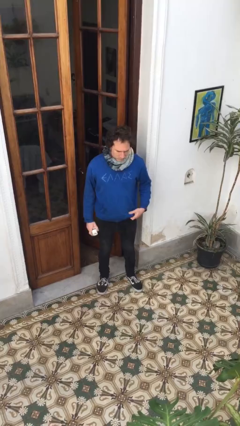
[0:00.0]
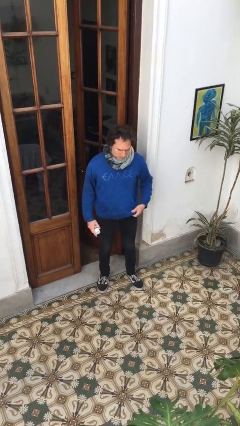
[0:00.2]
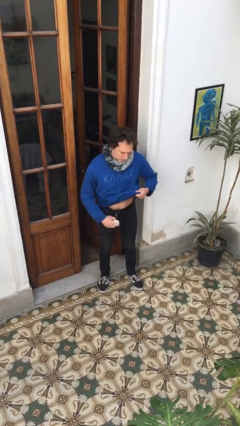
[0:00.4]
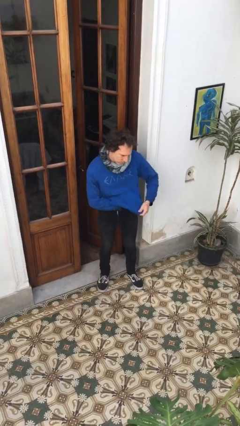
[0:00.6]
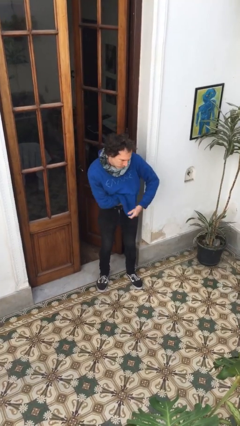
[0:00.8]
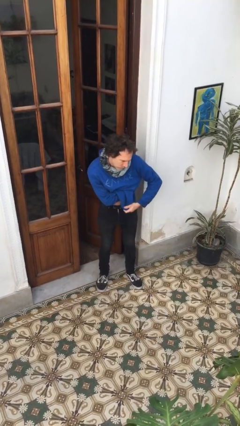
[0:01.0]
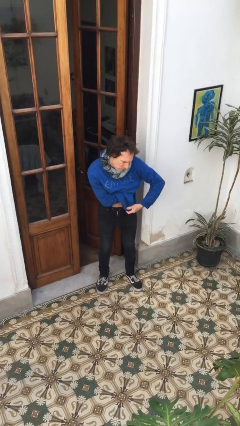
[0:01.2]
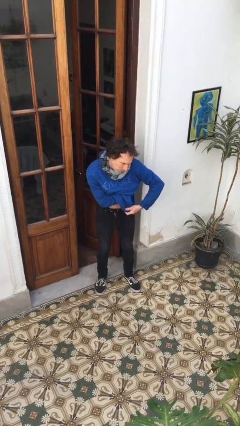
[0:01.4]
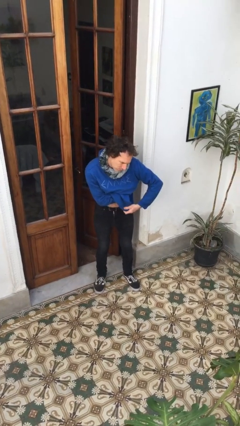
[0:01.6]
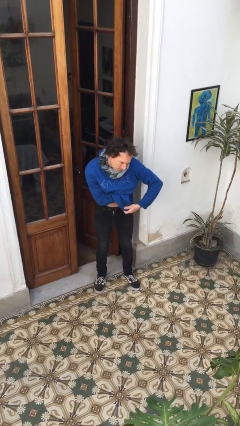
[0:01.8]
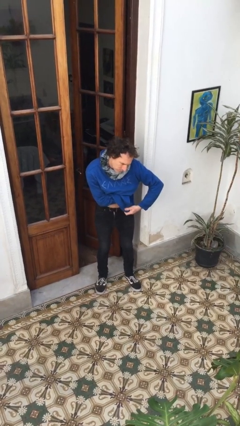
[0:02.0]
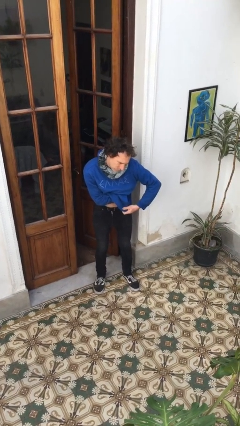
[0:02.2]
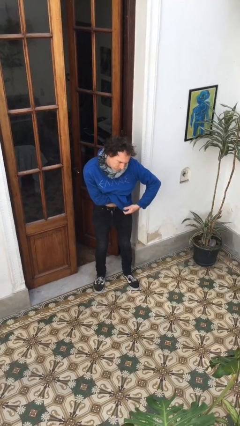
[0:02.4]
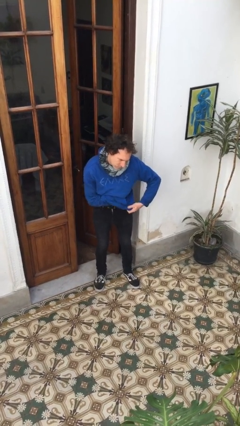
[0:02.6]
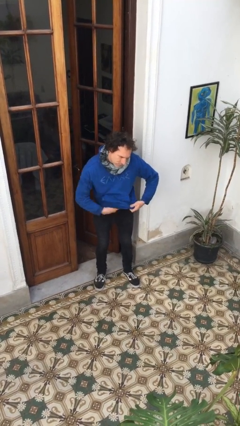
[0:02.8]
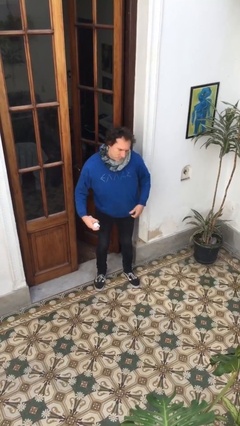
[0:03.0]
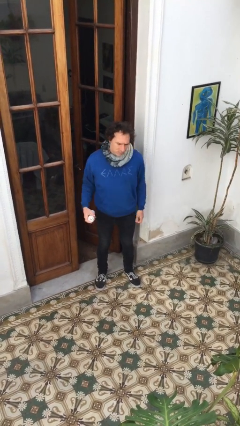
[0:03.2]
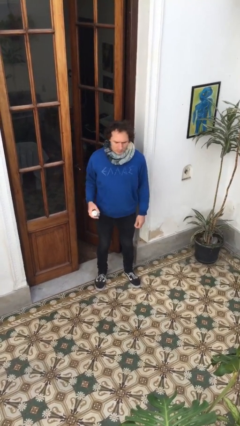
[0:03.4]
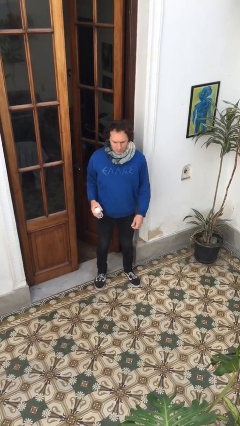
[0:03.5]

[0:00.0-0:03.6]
person applies deodorant

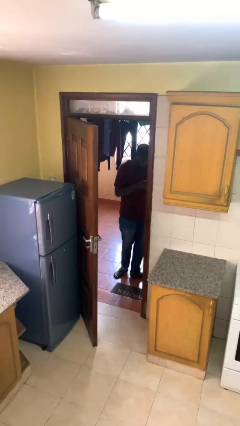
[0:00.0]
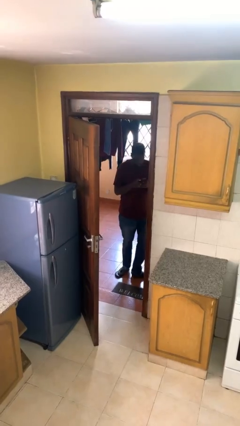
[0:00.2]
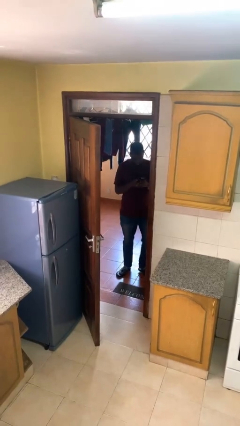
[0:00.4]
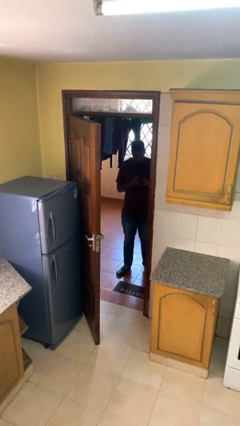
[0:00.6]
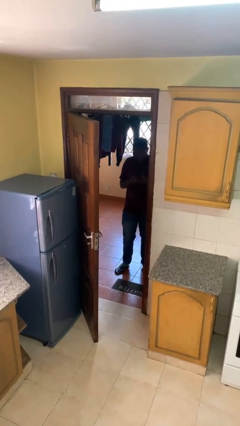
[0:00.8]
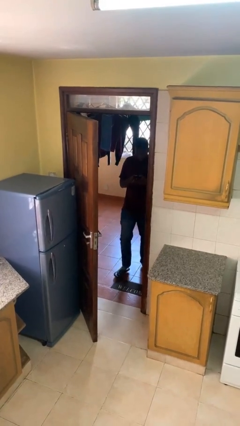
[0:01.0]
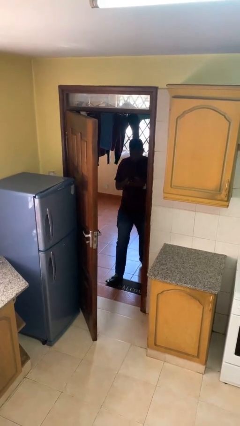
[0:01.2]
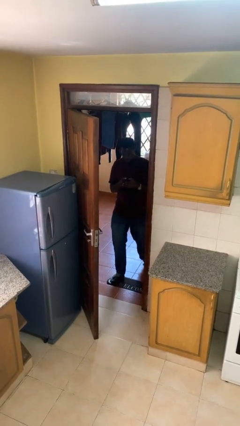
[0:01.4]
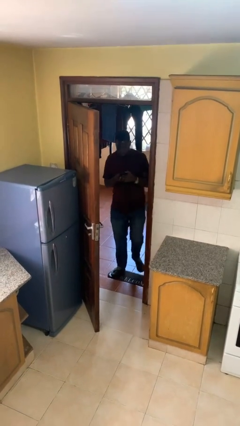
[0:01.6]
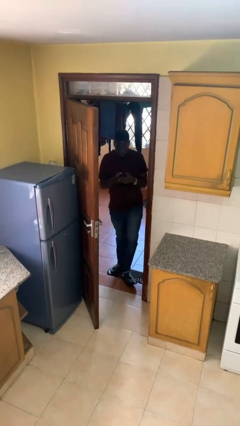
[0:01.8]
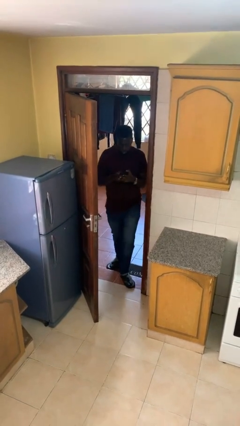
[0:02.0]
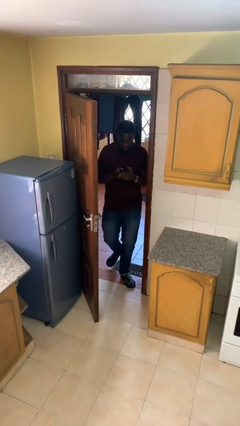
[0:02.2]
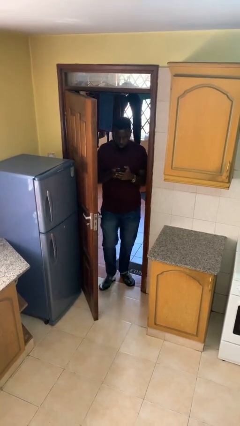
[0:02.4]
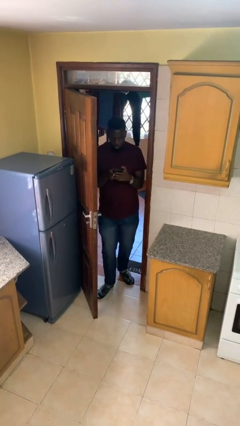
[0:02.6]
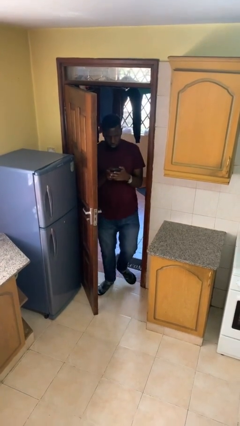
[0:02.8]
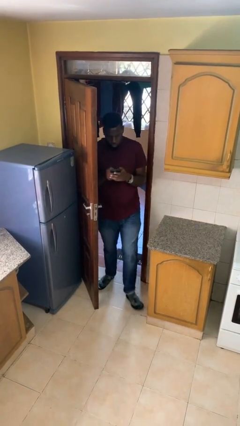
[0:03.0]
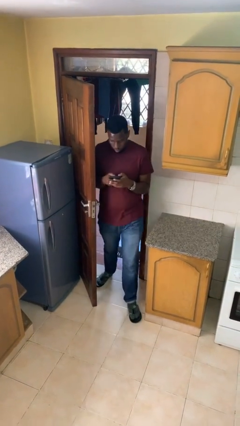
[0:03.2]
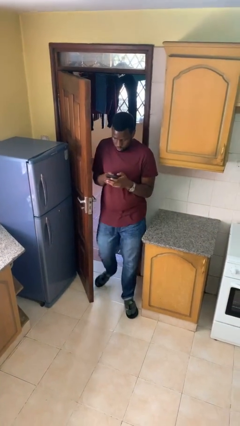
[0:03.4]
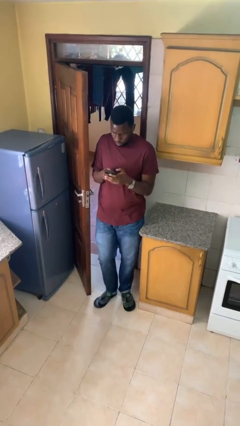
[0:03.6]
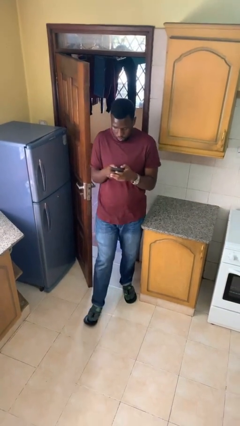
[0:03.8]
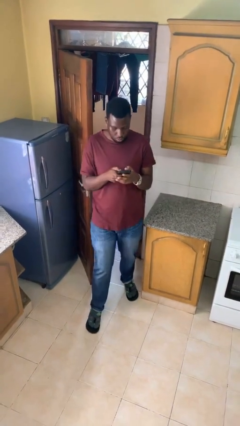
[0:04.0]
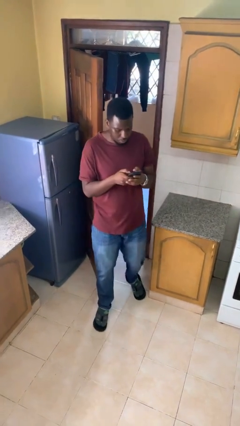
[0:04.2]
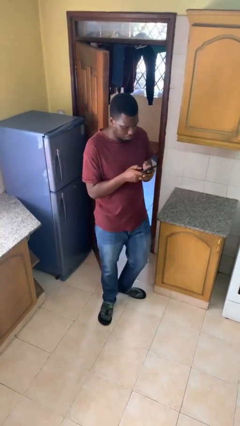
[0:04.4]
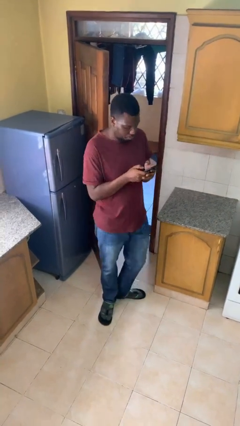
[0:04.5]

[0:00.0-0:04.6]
person enters scene through structure

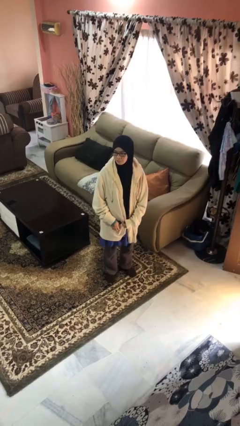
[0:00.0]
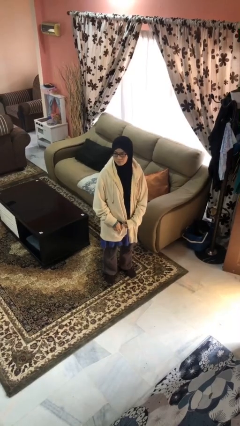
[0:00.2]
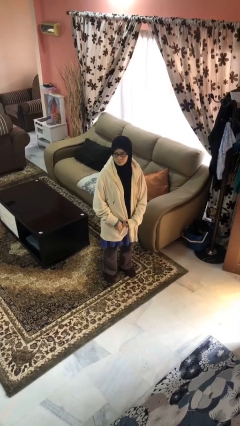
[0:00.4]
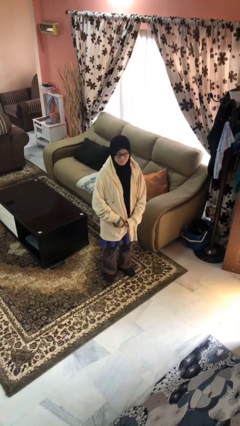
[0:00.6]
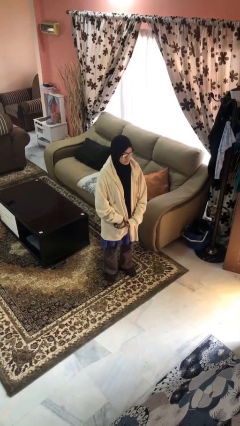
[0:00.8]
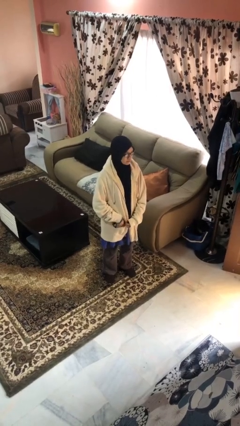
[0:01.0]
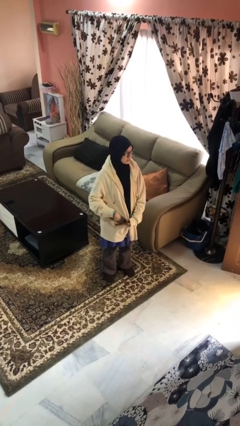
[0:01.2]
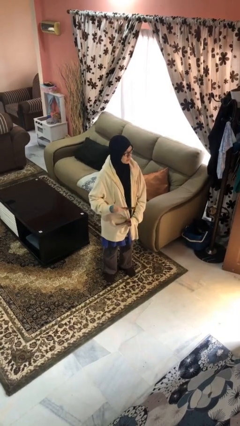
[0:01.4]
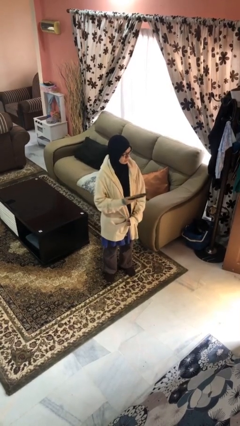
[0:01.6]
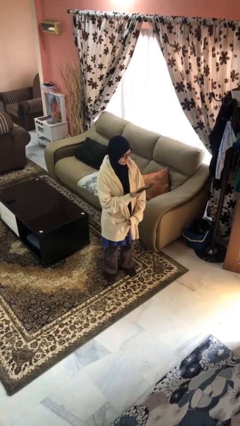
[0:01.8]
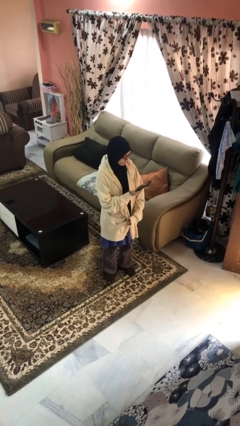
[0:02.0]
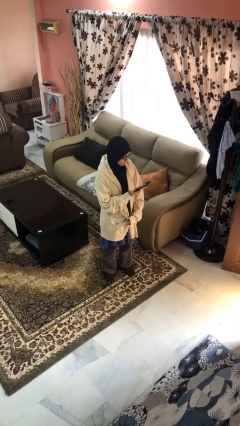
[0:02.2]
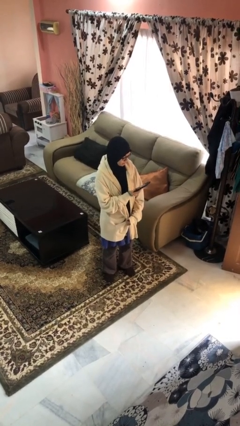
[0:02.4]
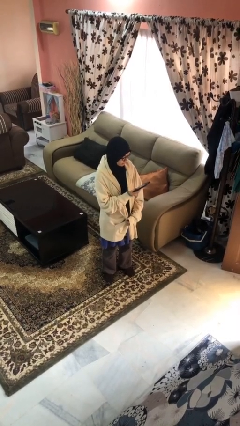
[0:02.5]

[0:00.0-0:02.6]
person takes phone from pocket

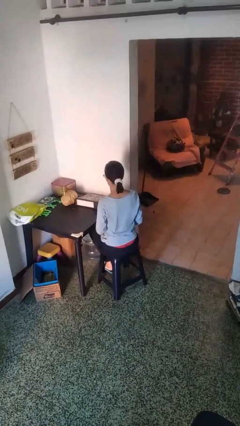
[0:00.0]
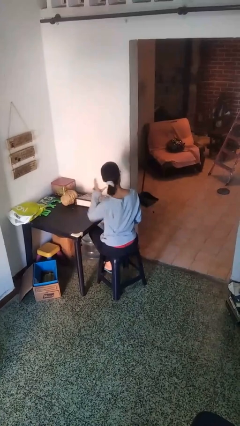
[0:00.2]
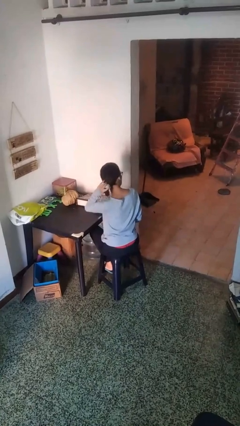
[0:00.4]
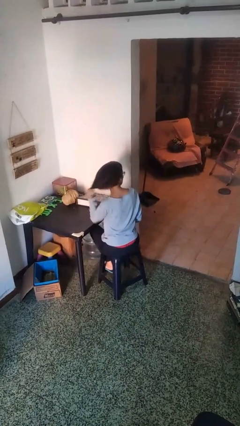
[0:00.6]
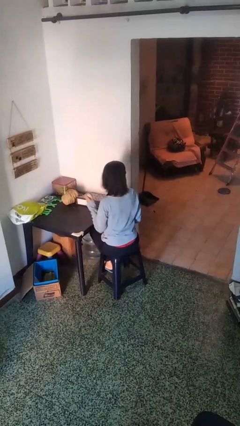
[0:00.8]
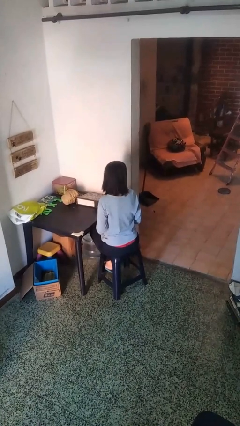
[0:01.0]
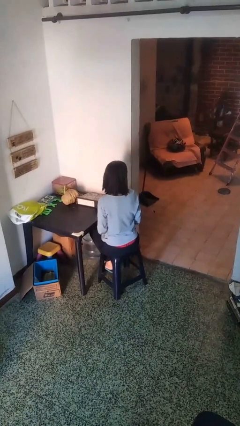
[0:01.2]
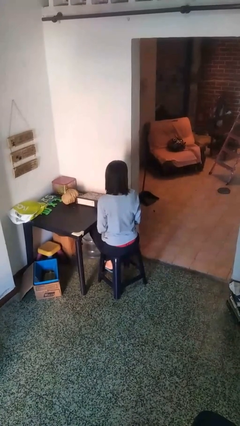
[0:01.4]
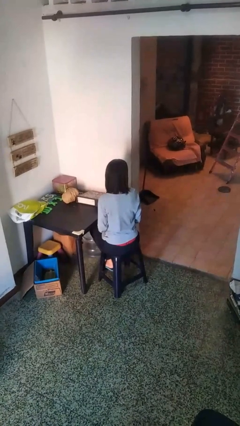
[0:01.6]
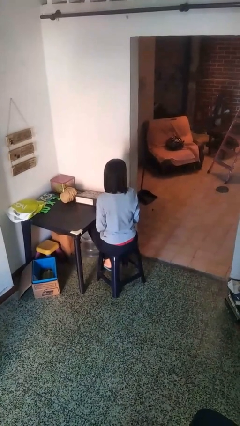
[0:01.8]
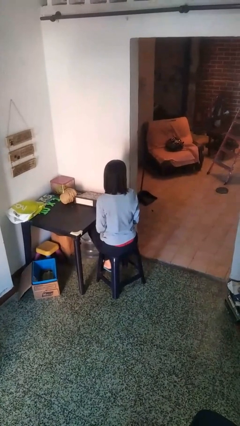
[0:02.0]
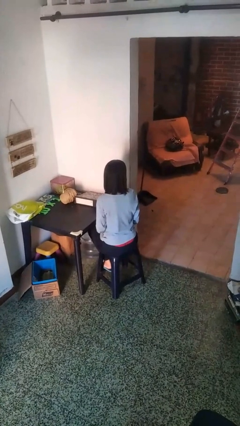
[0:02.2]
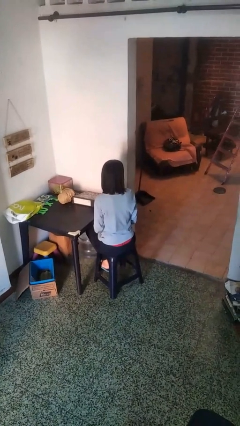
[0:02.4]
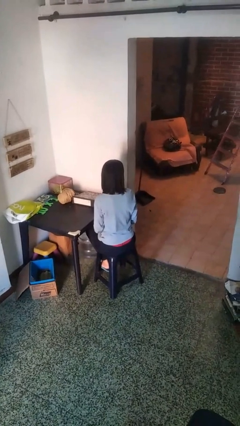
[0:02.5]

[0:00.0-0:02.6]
person takes off hairtie

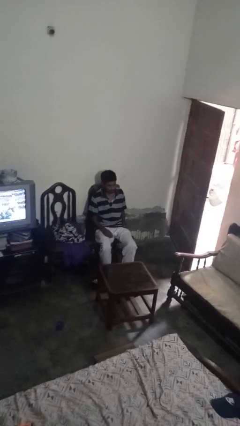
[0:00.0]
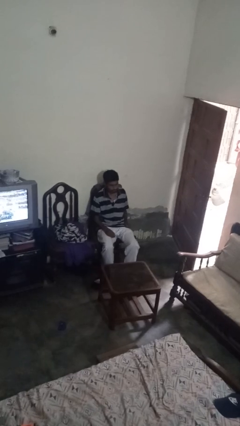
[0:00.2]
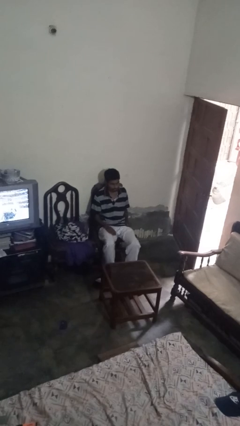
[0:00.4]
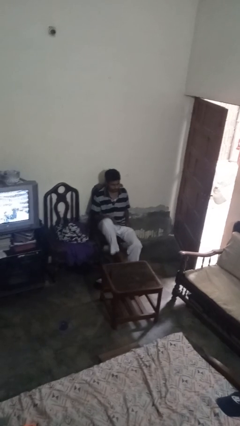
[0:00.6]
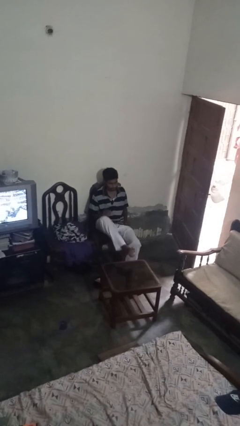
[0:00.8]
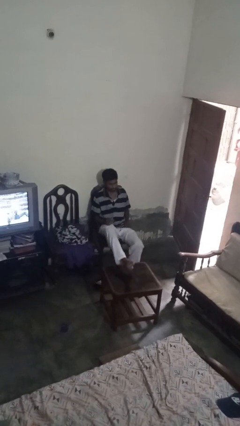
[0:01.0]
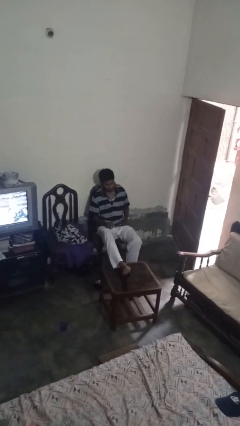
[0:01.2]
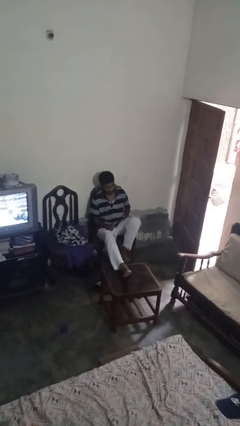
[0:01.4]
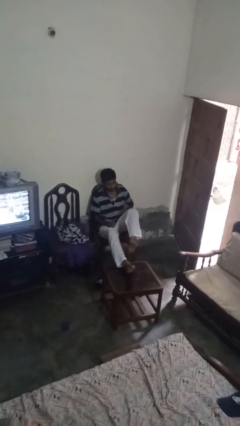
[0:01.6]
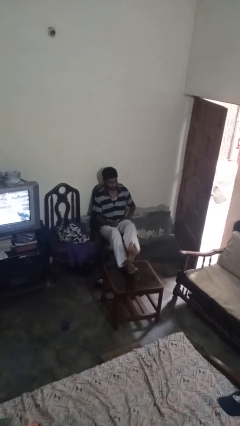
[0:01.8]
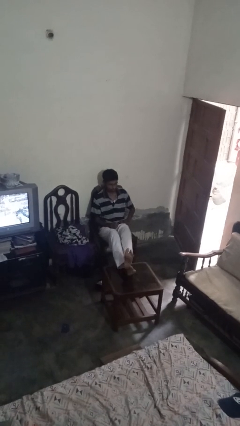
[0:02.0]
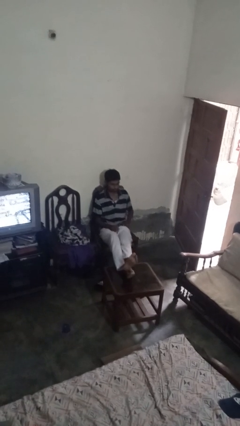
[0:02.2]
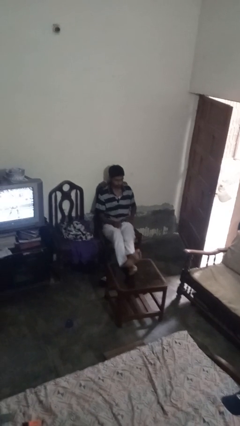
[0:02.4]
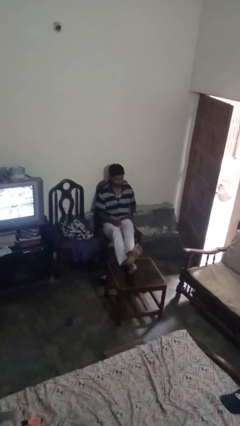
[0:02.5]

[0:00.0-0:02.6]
person puts feet up

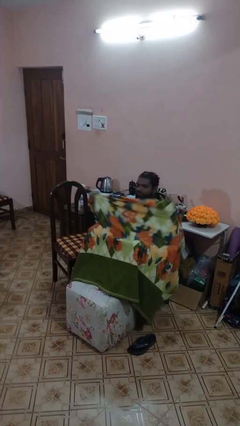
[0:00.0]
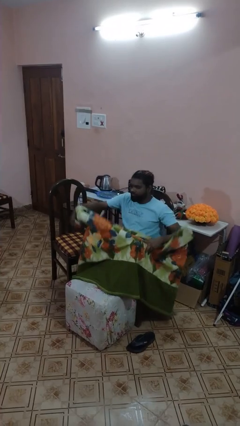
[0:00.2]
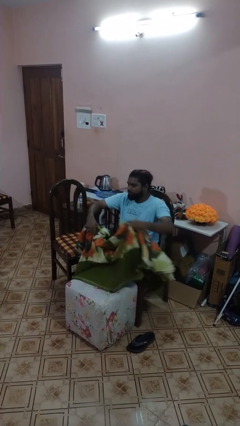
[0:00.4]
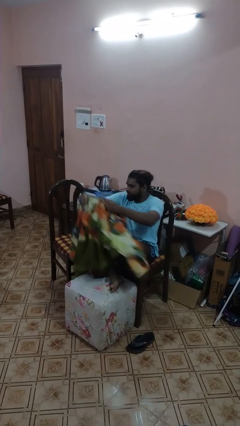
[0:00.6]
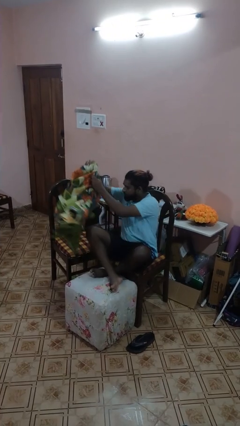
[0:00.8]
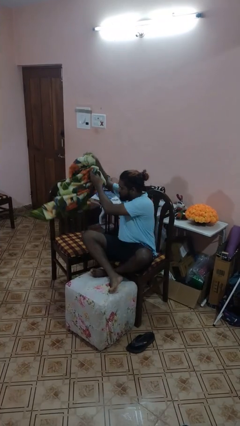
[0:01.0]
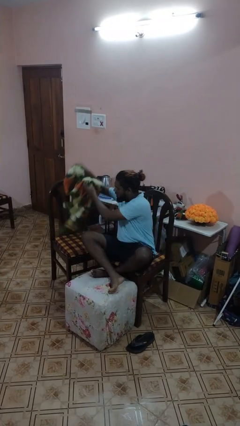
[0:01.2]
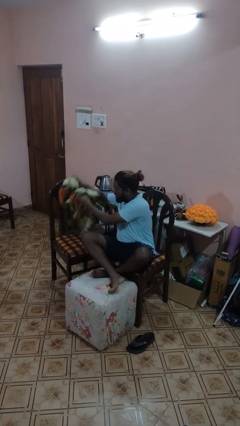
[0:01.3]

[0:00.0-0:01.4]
person uncovers with blanket

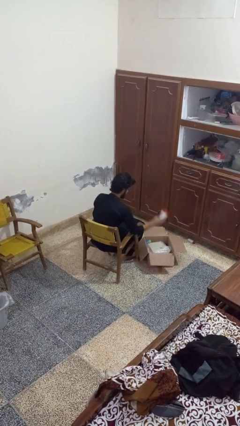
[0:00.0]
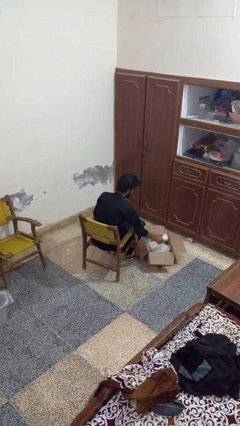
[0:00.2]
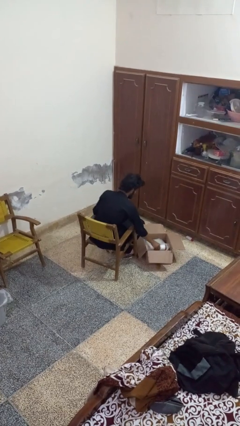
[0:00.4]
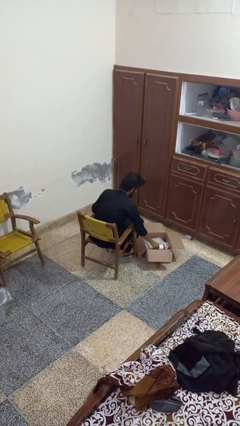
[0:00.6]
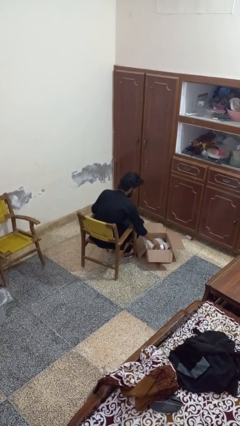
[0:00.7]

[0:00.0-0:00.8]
person puts object into box
